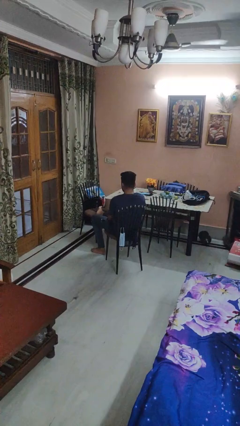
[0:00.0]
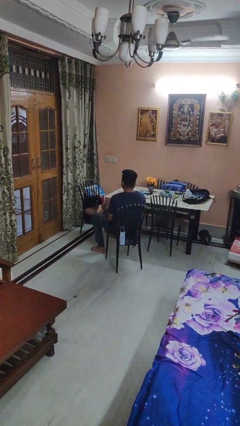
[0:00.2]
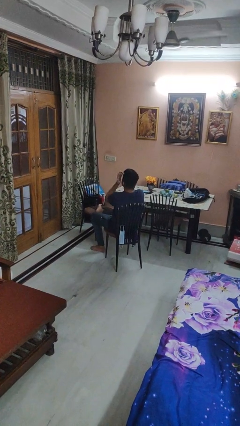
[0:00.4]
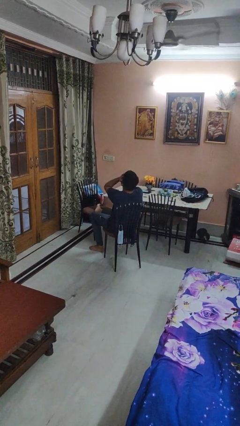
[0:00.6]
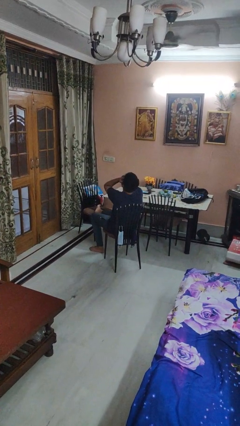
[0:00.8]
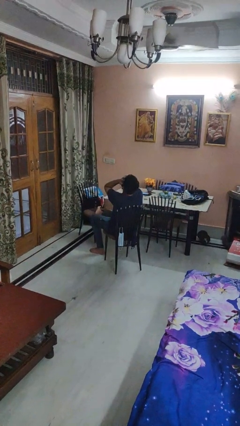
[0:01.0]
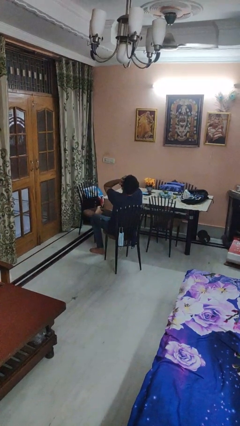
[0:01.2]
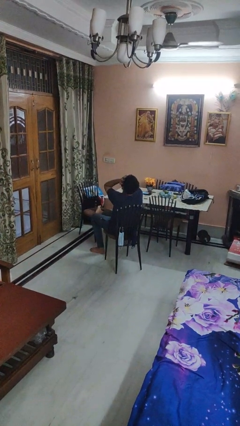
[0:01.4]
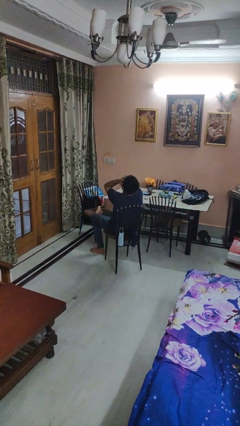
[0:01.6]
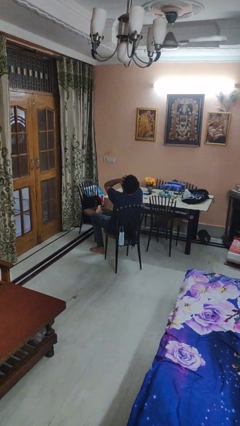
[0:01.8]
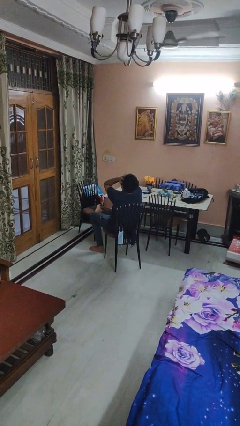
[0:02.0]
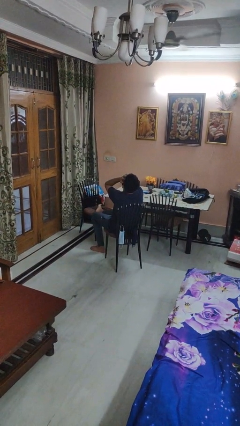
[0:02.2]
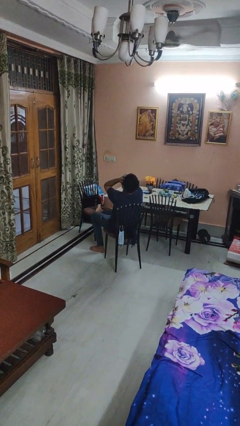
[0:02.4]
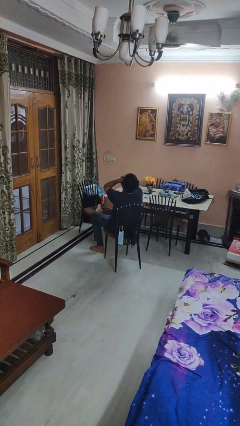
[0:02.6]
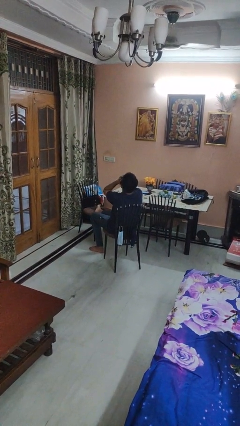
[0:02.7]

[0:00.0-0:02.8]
person covers face with hands

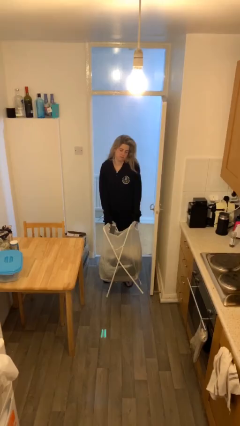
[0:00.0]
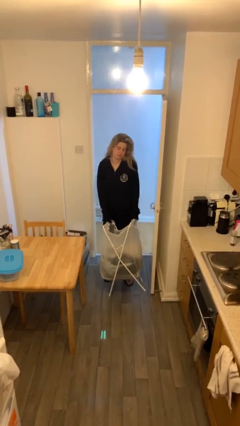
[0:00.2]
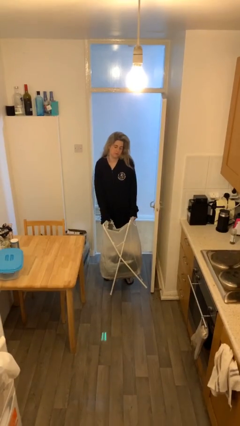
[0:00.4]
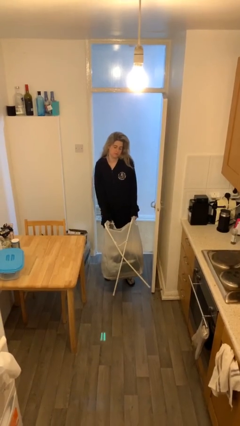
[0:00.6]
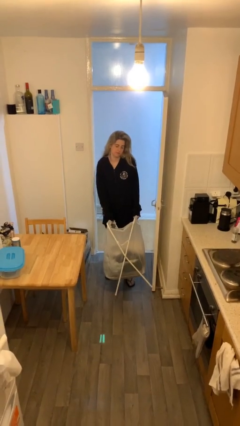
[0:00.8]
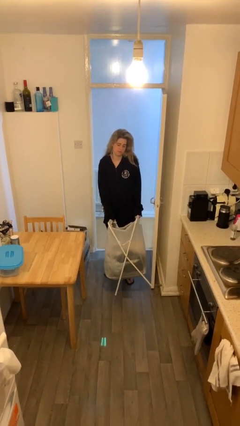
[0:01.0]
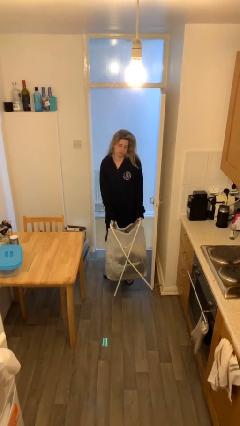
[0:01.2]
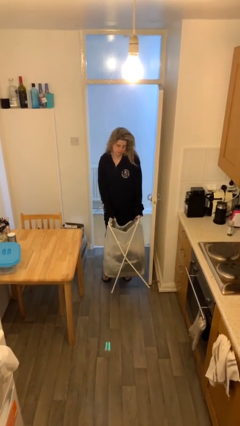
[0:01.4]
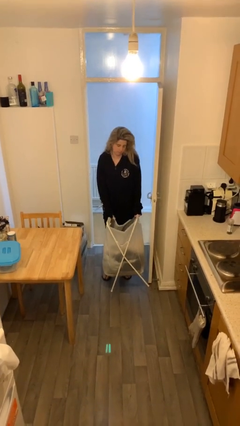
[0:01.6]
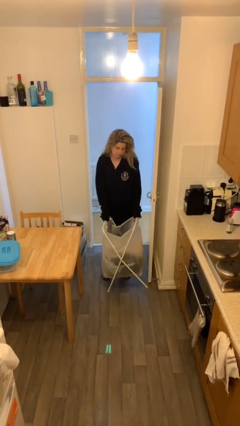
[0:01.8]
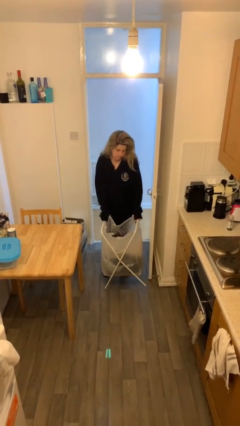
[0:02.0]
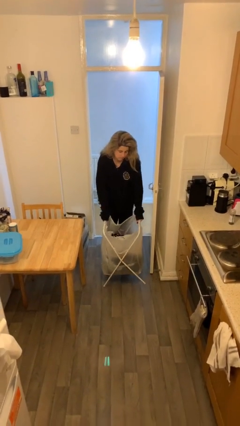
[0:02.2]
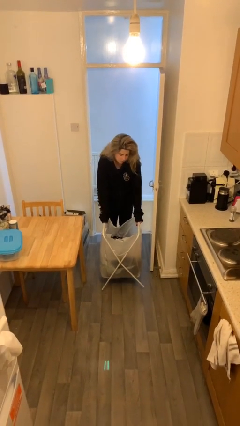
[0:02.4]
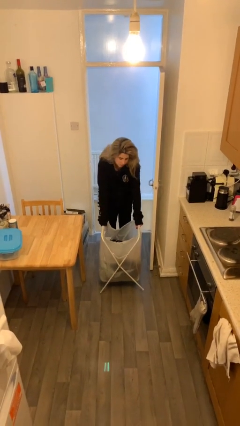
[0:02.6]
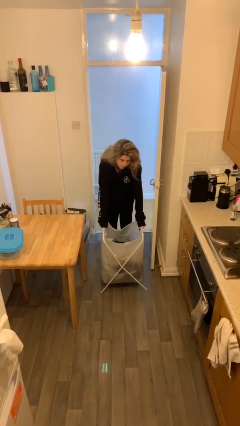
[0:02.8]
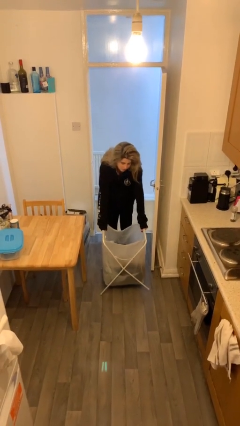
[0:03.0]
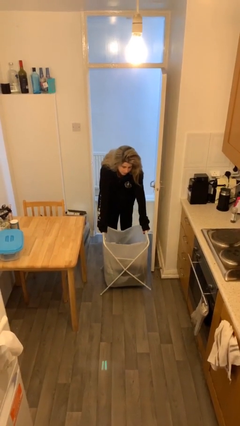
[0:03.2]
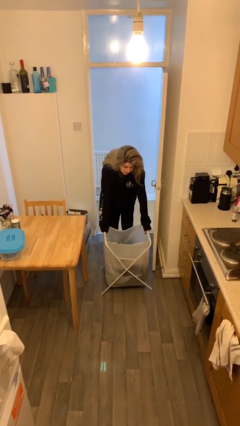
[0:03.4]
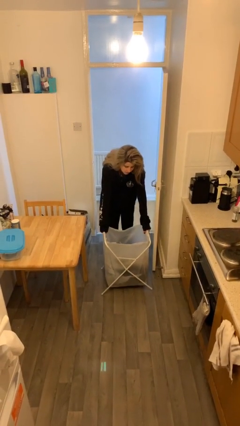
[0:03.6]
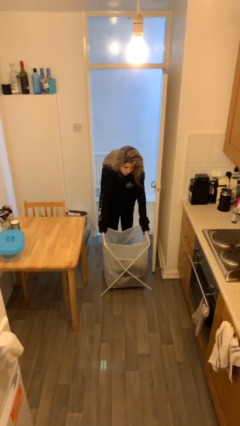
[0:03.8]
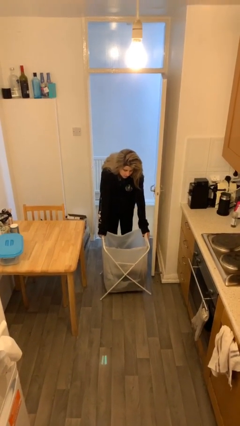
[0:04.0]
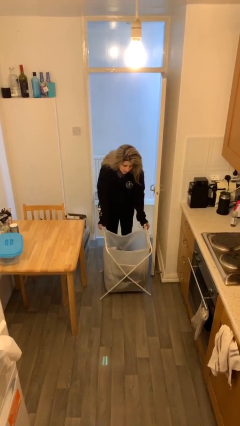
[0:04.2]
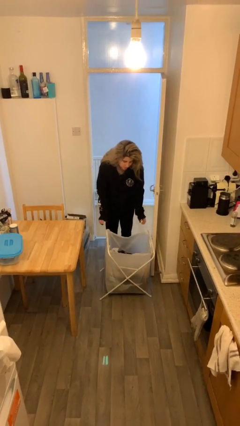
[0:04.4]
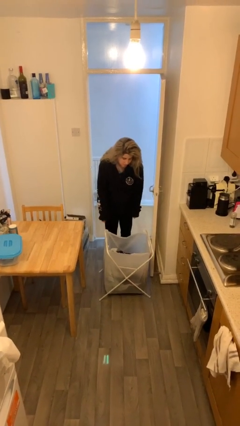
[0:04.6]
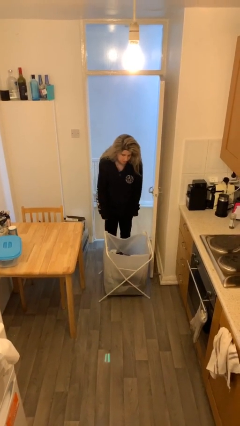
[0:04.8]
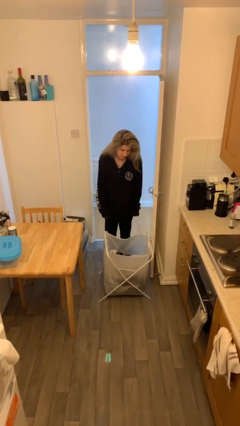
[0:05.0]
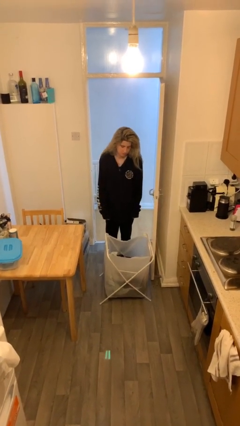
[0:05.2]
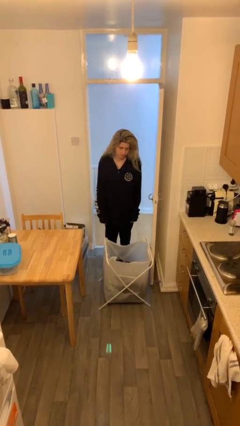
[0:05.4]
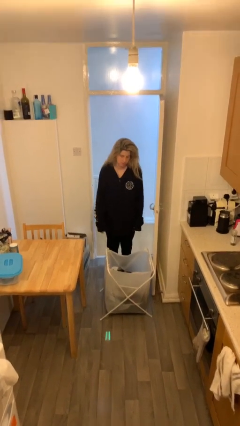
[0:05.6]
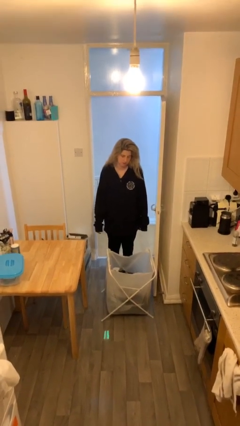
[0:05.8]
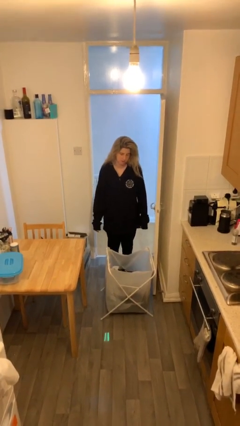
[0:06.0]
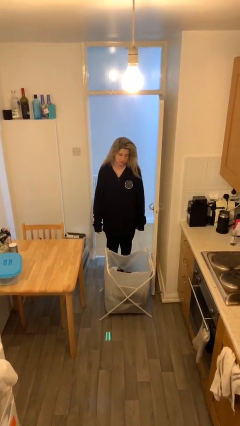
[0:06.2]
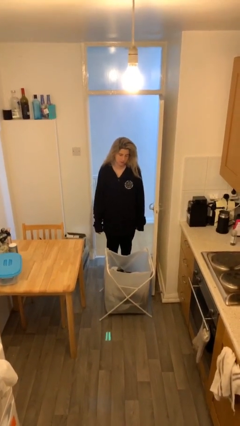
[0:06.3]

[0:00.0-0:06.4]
person puts down object on floor

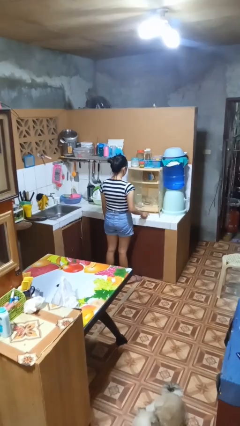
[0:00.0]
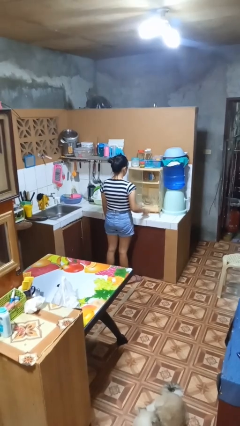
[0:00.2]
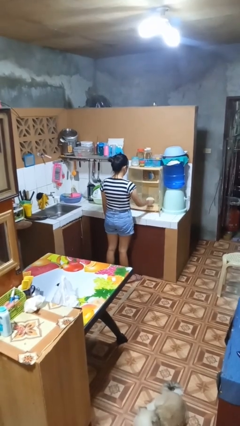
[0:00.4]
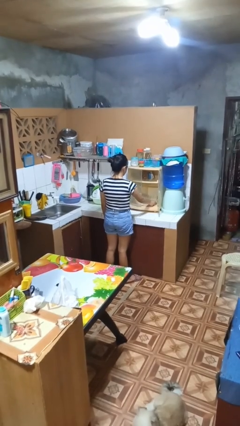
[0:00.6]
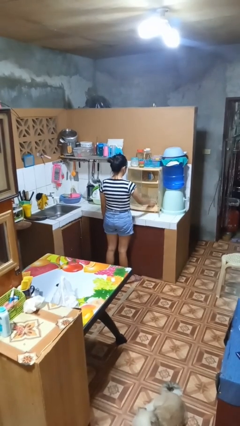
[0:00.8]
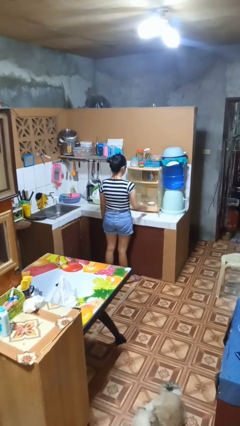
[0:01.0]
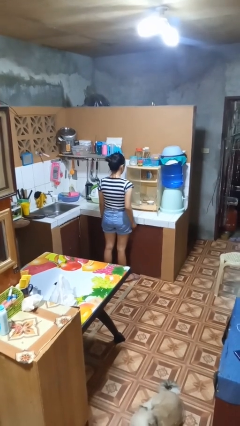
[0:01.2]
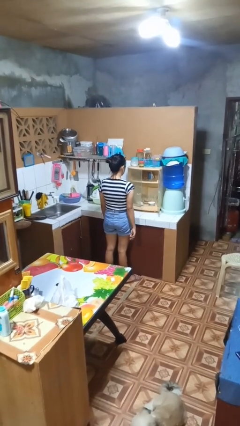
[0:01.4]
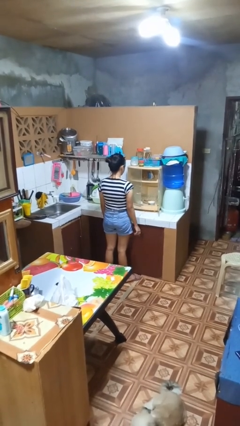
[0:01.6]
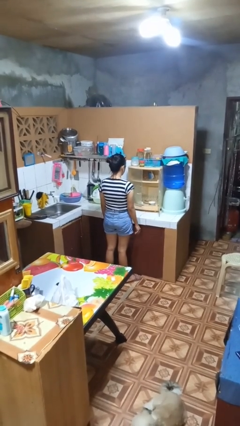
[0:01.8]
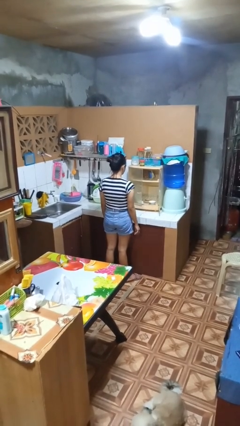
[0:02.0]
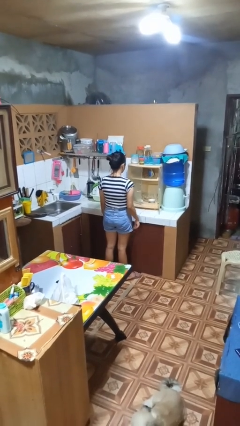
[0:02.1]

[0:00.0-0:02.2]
person puts object in cabinet

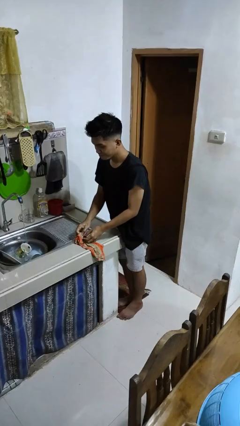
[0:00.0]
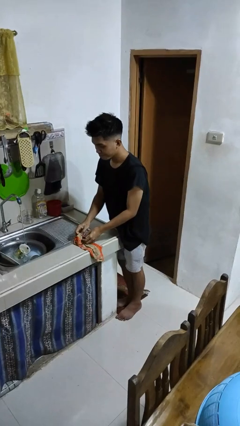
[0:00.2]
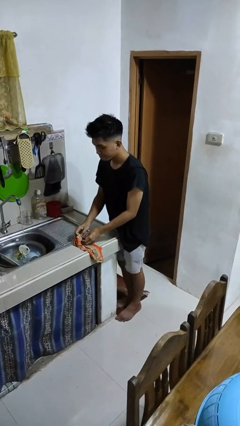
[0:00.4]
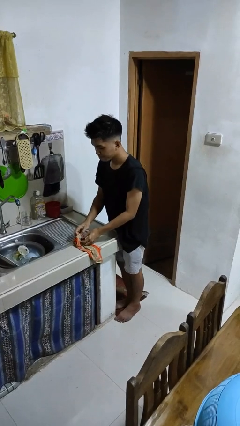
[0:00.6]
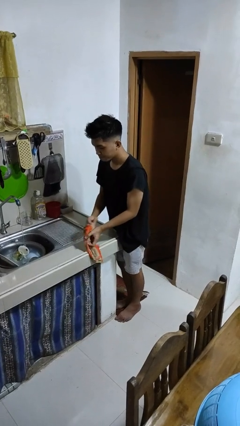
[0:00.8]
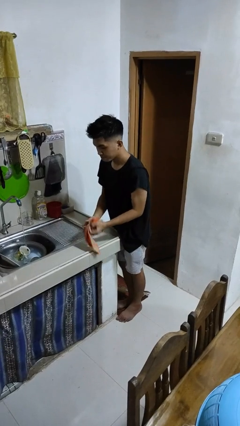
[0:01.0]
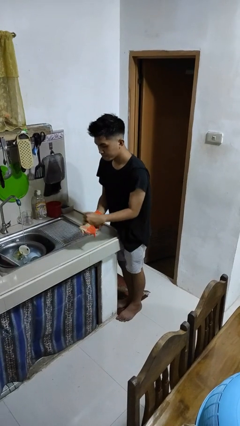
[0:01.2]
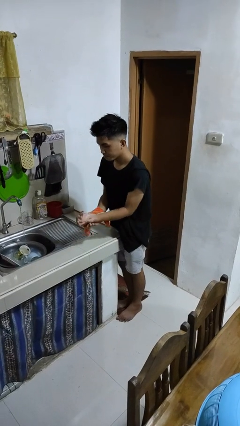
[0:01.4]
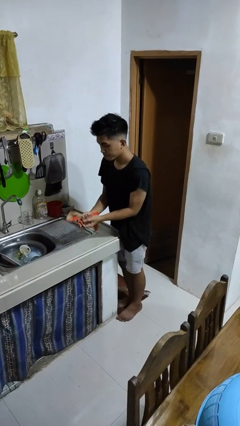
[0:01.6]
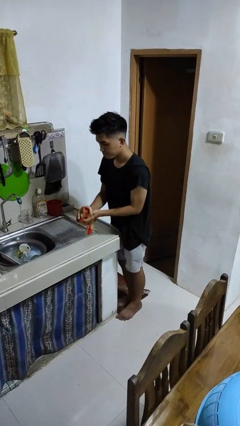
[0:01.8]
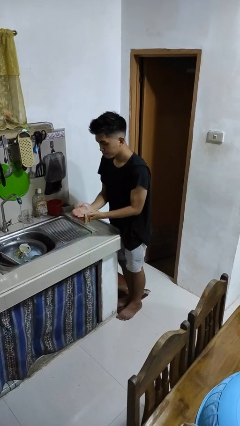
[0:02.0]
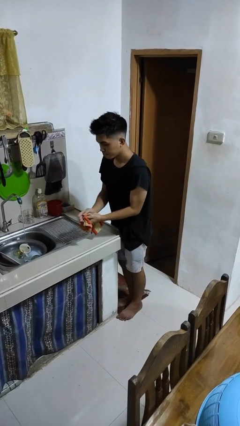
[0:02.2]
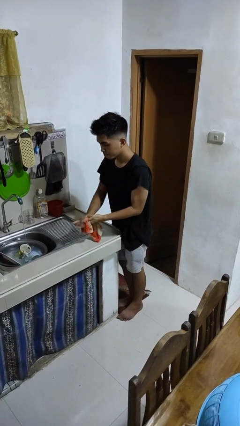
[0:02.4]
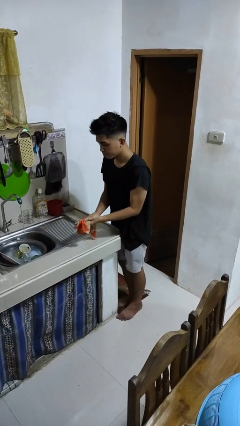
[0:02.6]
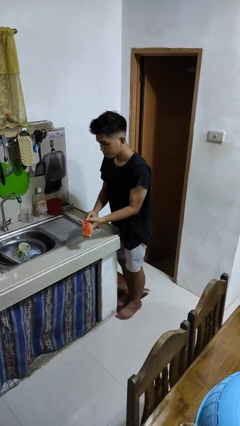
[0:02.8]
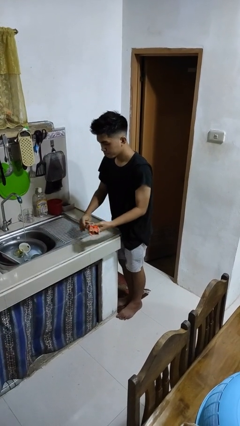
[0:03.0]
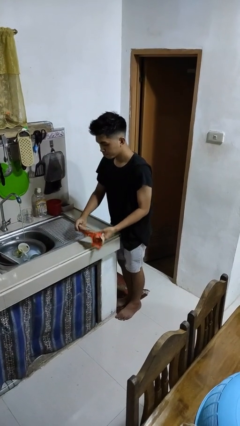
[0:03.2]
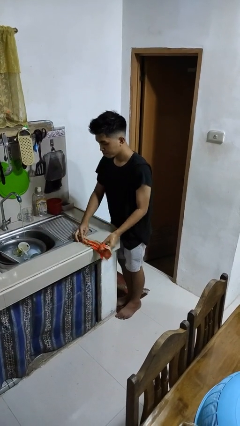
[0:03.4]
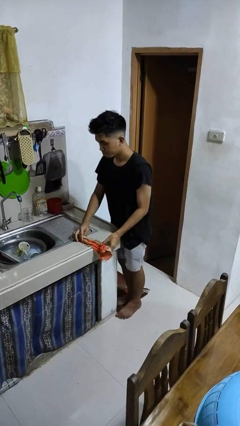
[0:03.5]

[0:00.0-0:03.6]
person dries hands with towel

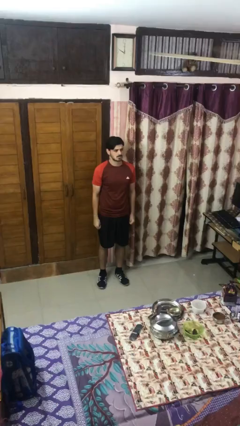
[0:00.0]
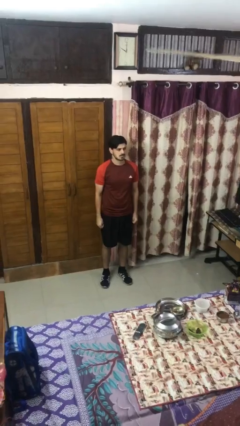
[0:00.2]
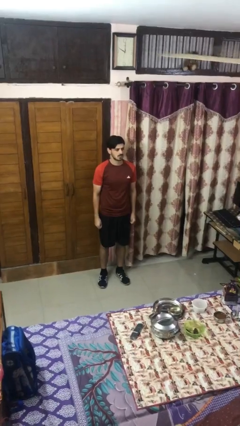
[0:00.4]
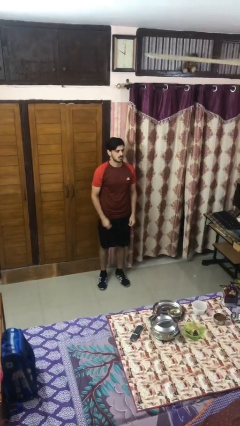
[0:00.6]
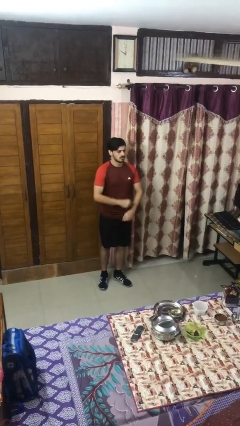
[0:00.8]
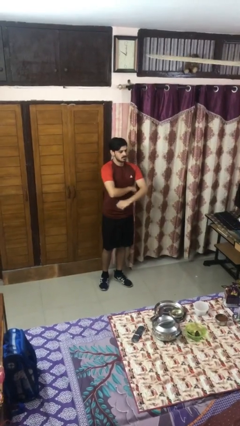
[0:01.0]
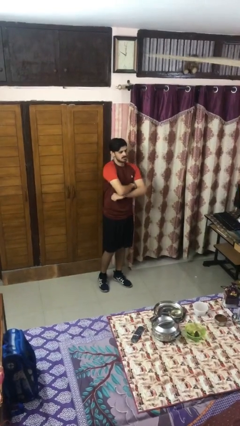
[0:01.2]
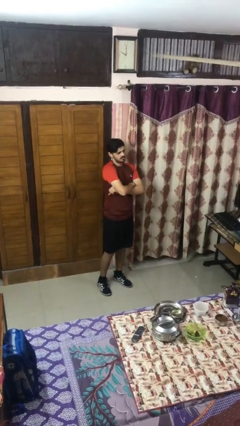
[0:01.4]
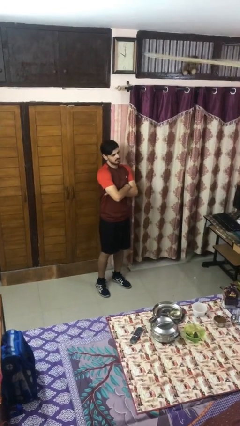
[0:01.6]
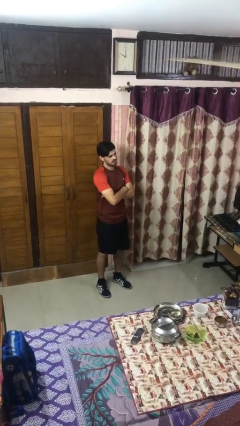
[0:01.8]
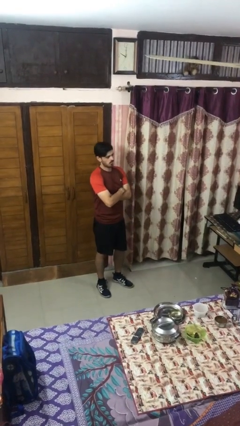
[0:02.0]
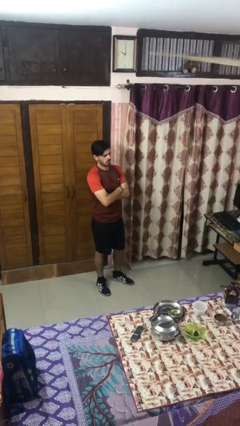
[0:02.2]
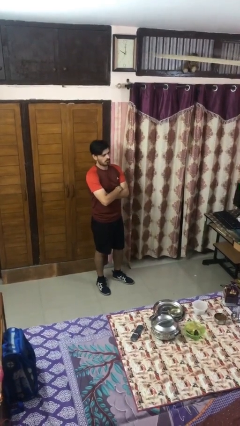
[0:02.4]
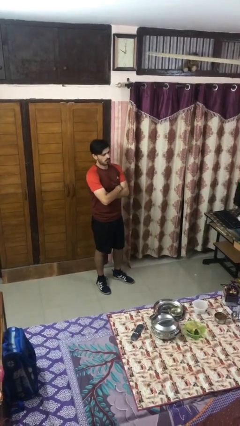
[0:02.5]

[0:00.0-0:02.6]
person crosses arms
